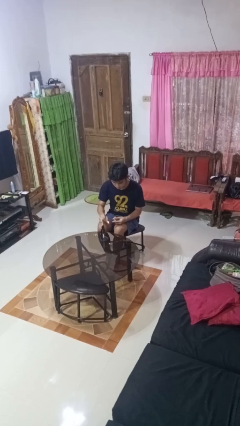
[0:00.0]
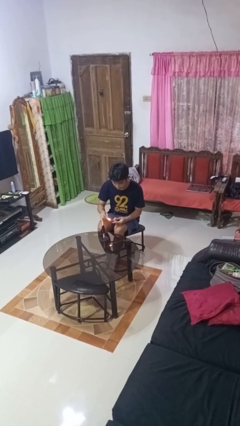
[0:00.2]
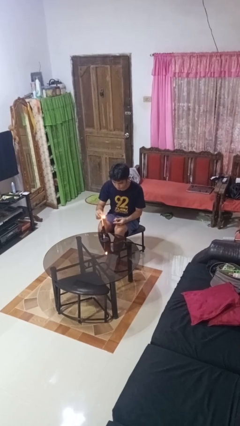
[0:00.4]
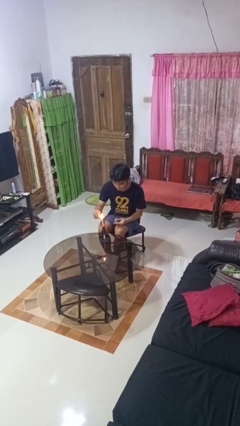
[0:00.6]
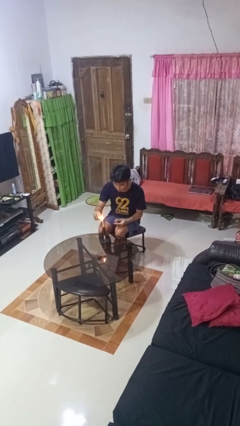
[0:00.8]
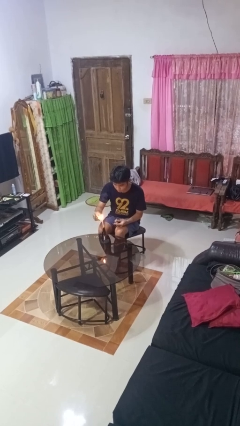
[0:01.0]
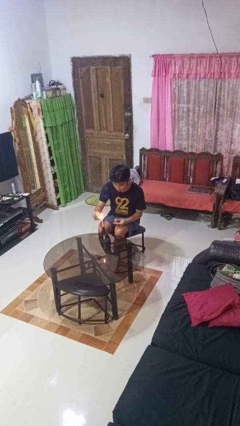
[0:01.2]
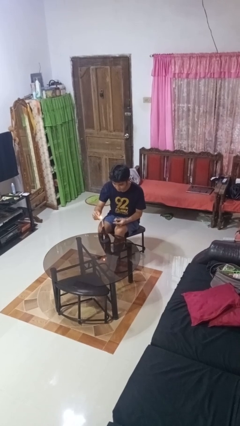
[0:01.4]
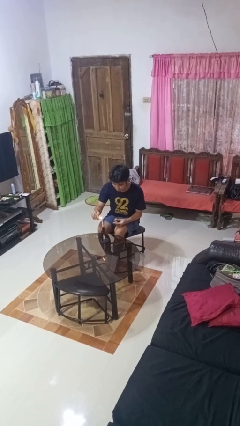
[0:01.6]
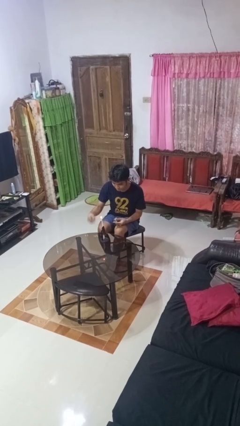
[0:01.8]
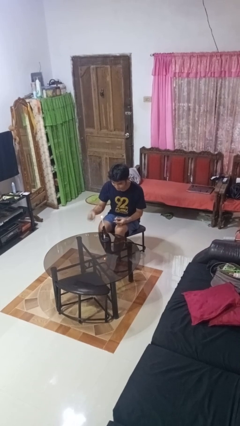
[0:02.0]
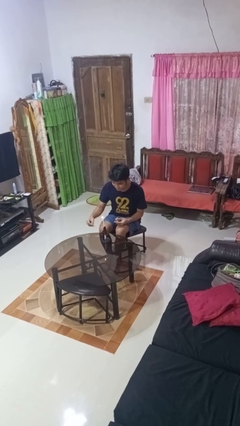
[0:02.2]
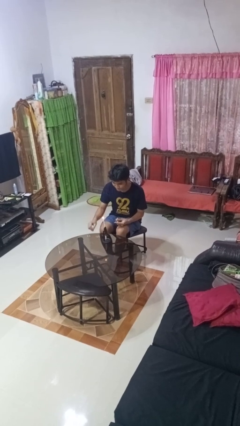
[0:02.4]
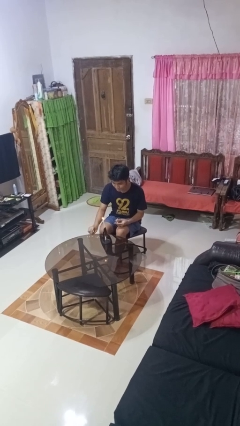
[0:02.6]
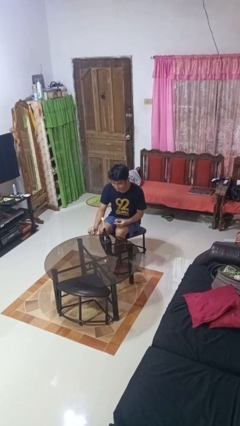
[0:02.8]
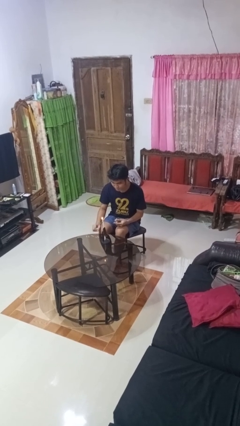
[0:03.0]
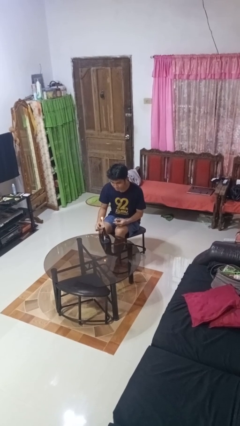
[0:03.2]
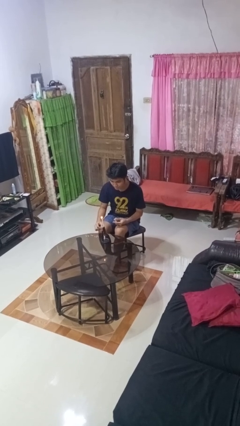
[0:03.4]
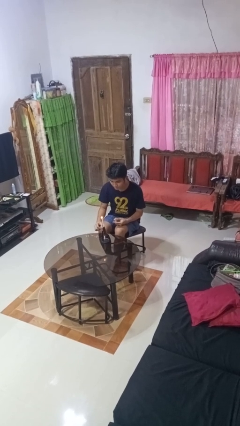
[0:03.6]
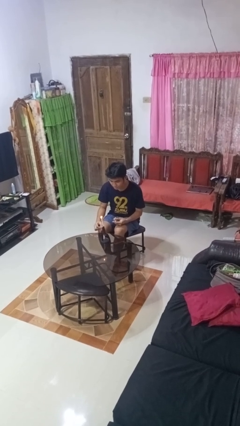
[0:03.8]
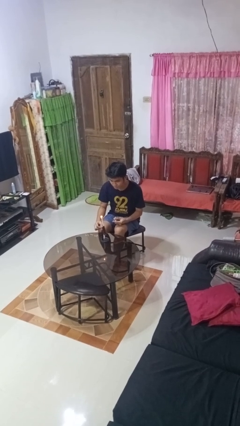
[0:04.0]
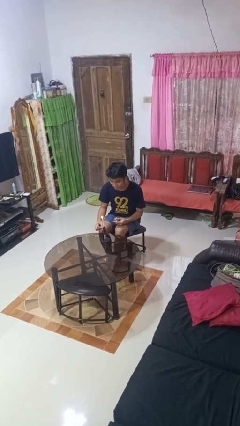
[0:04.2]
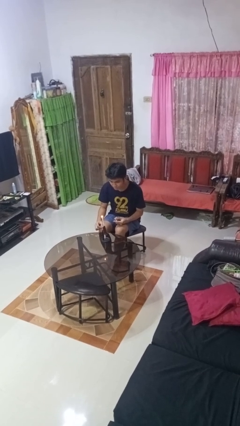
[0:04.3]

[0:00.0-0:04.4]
person lights candle

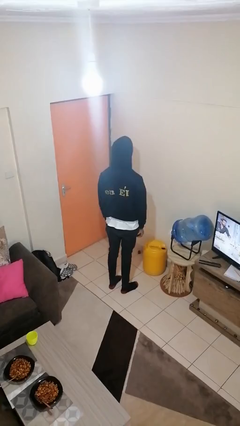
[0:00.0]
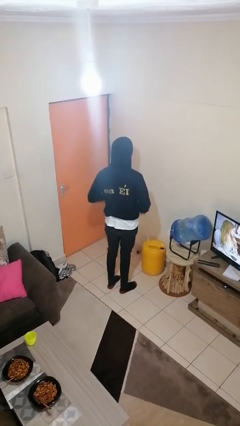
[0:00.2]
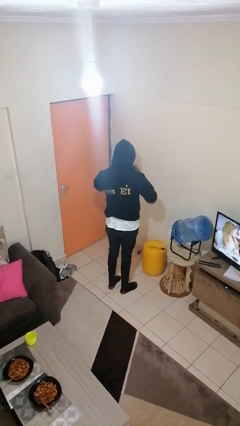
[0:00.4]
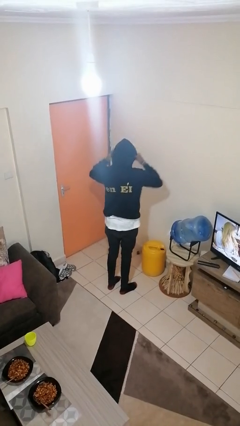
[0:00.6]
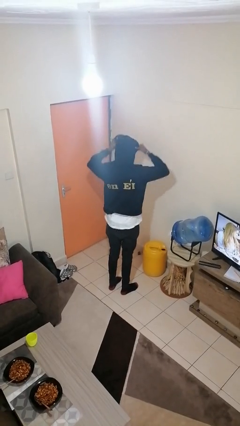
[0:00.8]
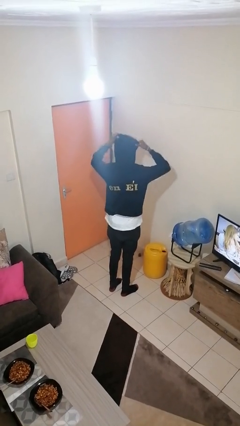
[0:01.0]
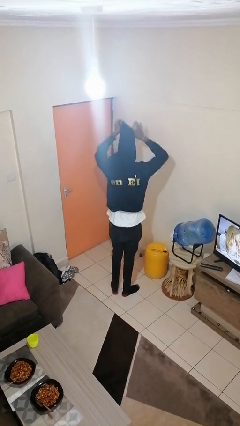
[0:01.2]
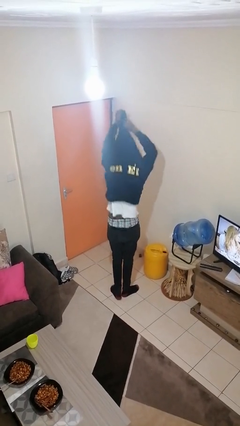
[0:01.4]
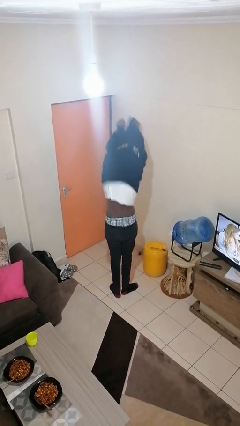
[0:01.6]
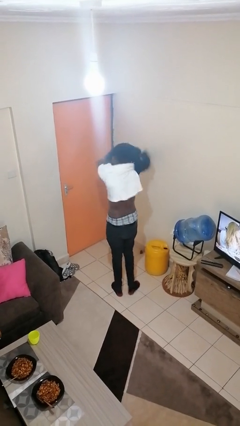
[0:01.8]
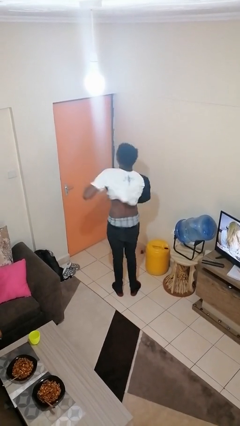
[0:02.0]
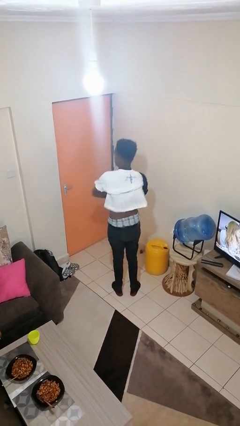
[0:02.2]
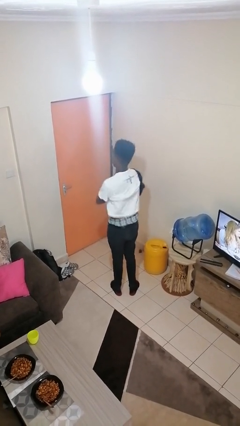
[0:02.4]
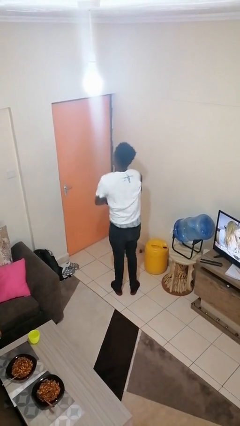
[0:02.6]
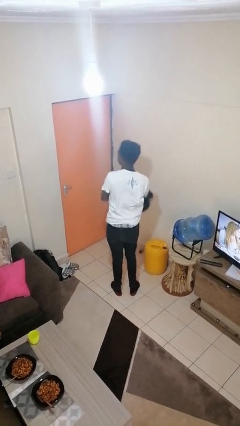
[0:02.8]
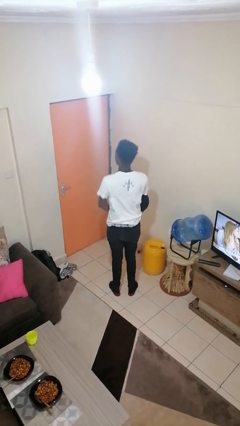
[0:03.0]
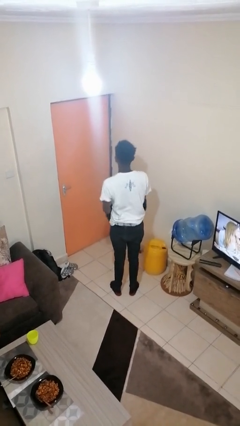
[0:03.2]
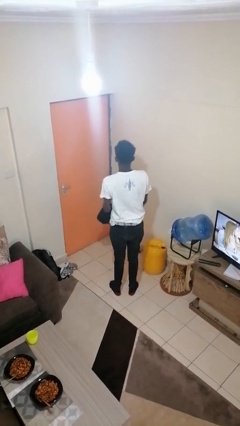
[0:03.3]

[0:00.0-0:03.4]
person takes off hoodie

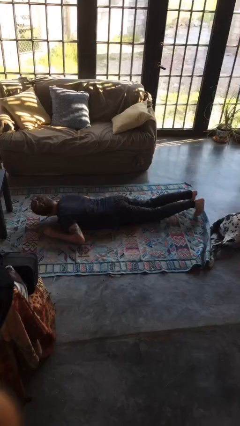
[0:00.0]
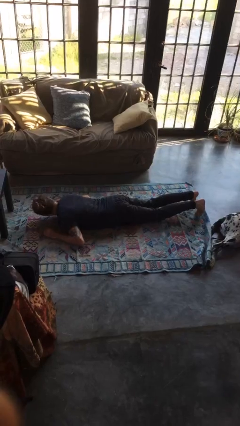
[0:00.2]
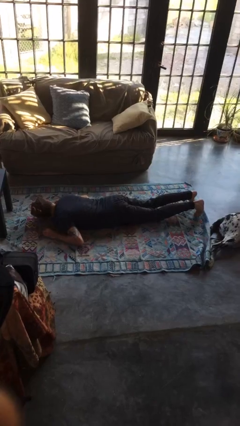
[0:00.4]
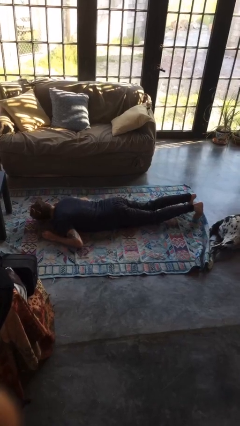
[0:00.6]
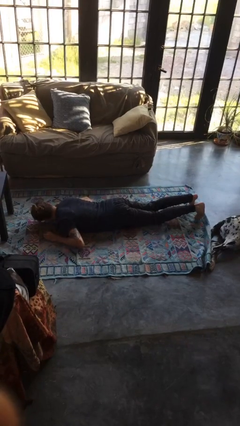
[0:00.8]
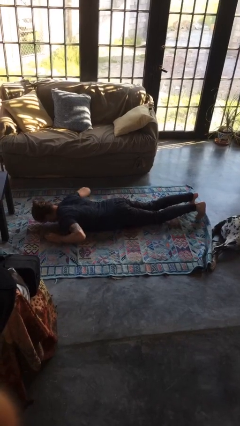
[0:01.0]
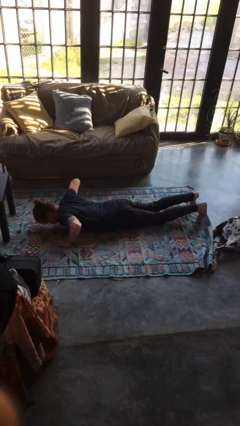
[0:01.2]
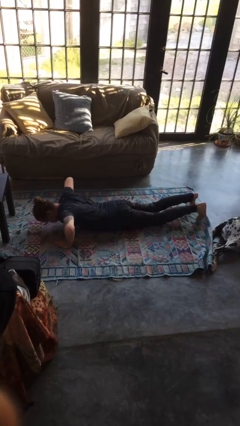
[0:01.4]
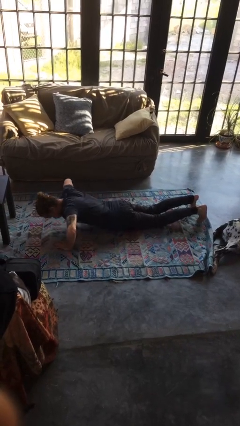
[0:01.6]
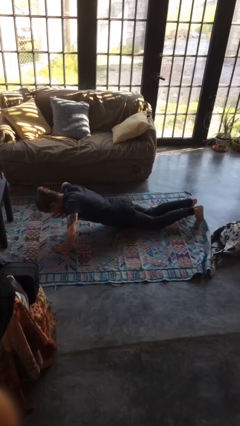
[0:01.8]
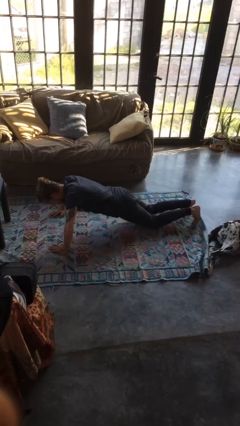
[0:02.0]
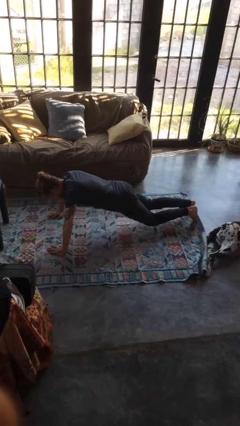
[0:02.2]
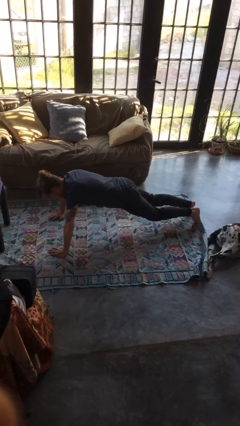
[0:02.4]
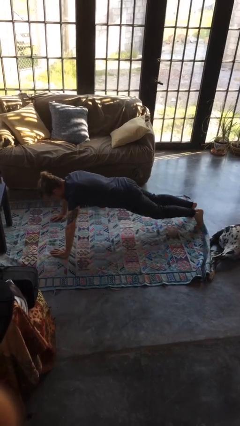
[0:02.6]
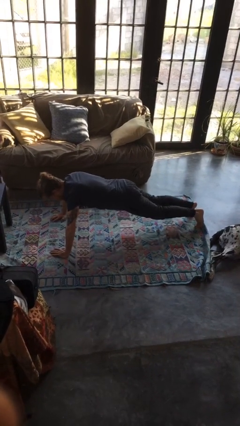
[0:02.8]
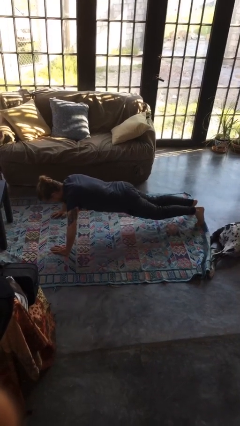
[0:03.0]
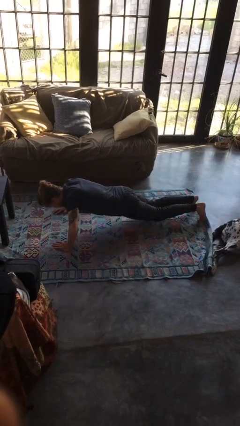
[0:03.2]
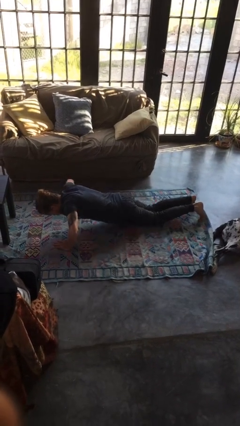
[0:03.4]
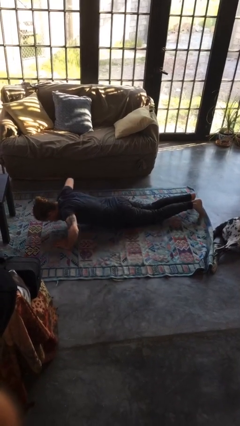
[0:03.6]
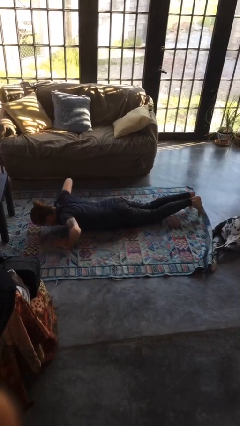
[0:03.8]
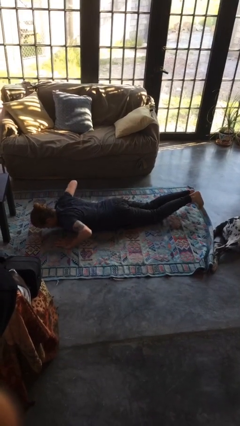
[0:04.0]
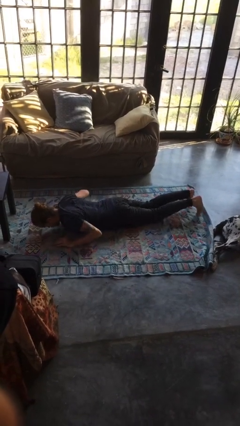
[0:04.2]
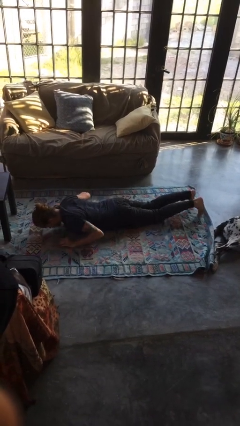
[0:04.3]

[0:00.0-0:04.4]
person exercises with pushup

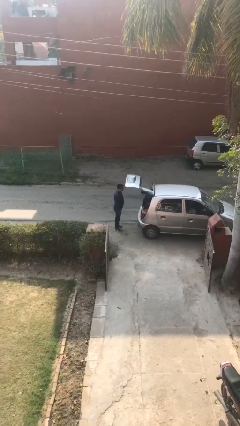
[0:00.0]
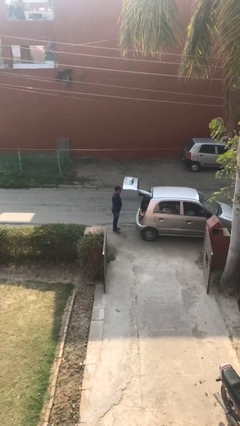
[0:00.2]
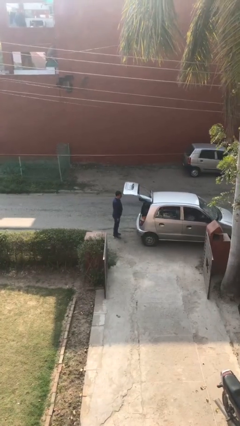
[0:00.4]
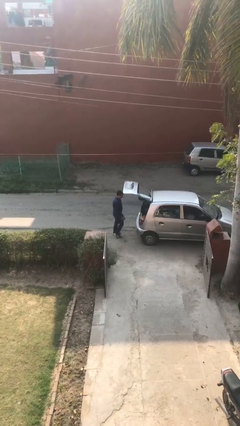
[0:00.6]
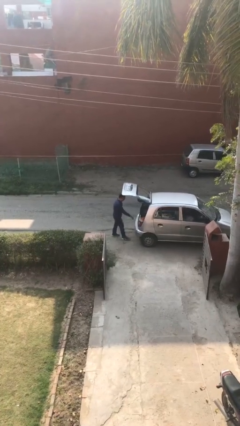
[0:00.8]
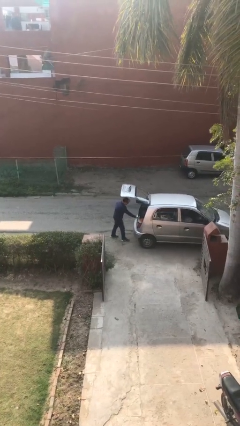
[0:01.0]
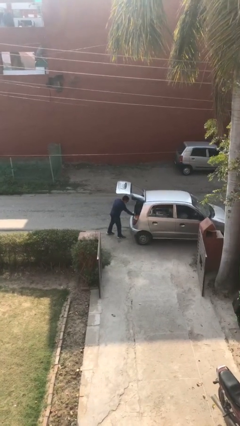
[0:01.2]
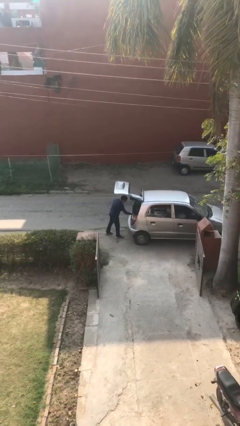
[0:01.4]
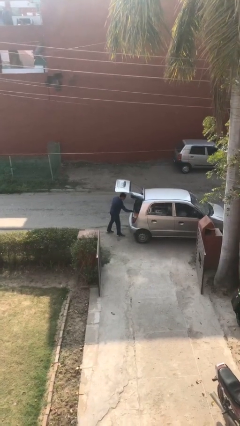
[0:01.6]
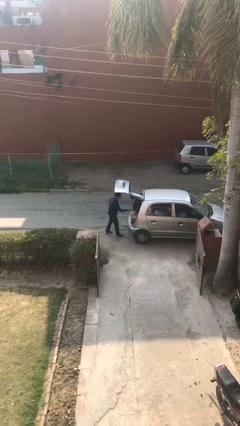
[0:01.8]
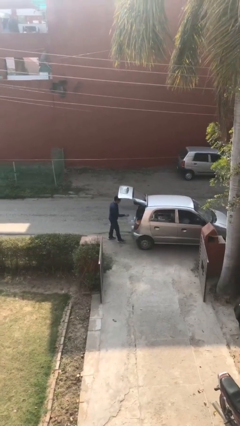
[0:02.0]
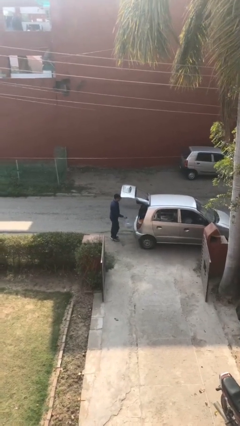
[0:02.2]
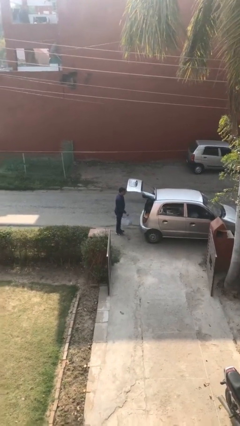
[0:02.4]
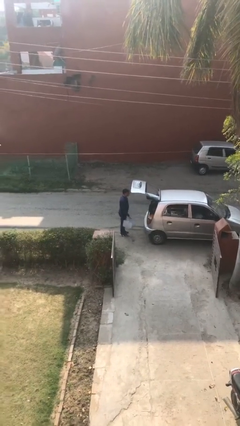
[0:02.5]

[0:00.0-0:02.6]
person unloads car

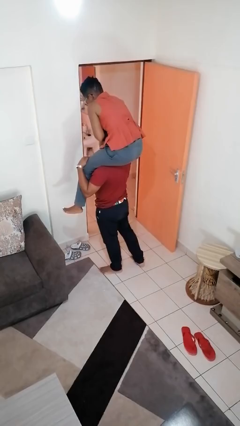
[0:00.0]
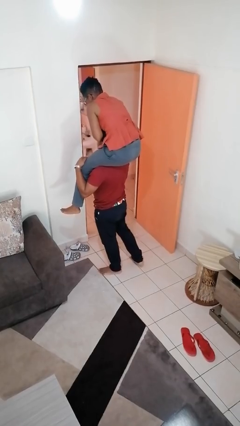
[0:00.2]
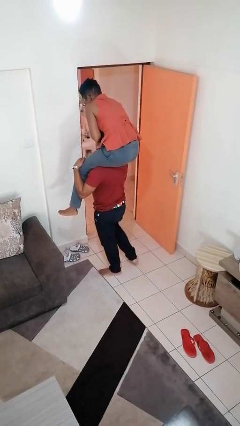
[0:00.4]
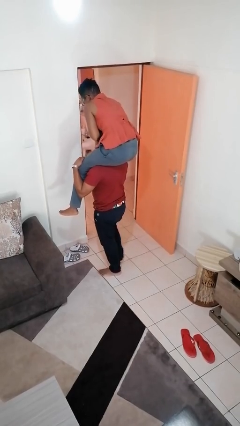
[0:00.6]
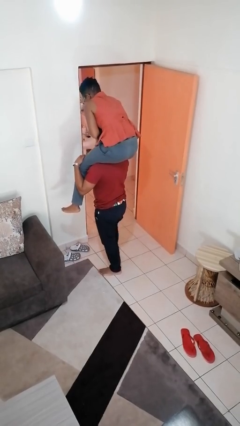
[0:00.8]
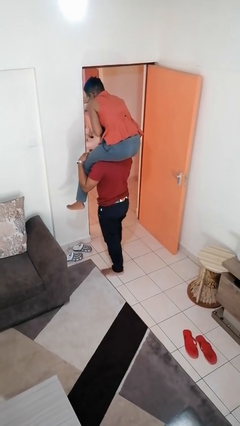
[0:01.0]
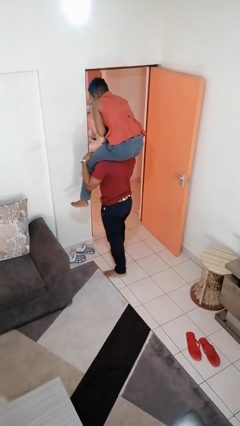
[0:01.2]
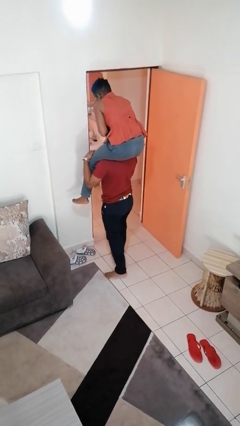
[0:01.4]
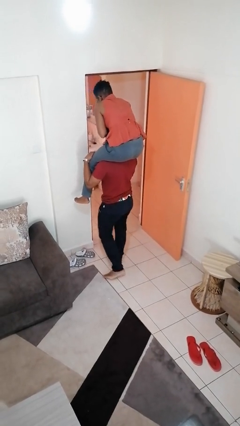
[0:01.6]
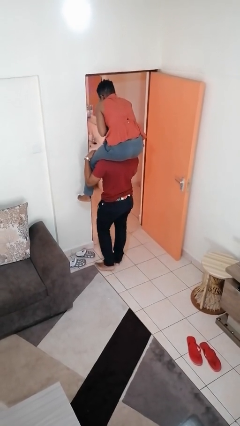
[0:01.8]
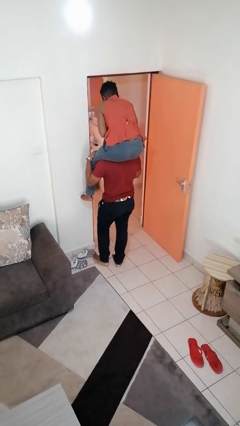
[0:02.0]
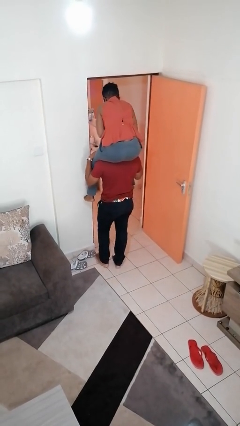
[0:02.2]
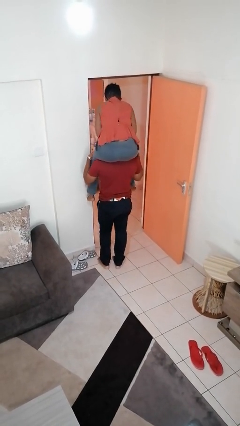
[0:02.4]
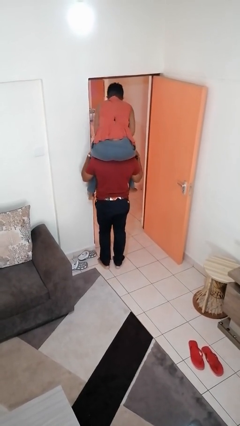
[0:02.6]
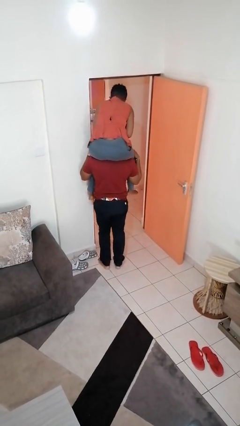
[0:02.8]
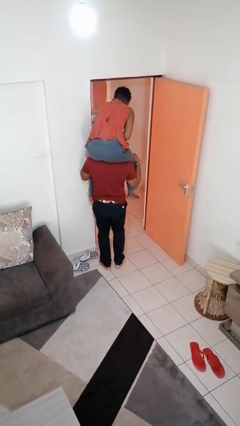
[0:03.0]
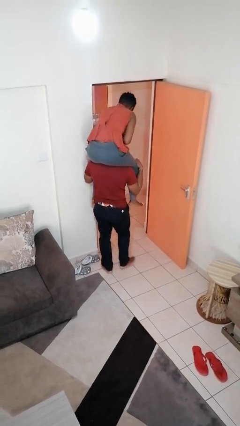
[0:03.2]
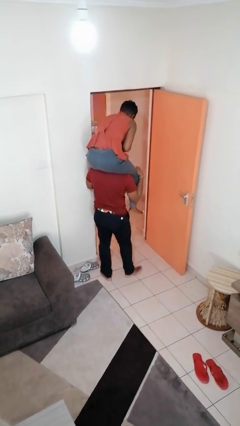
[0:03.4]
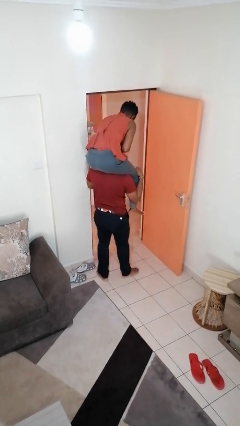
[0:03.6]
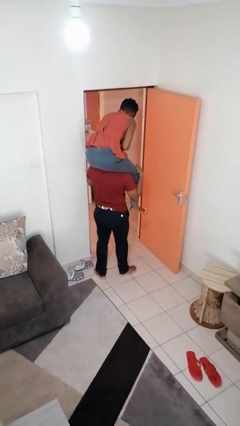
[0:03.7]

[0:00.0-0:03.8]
person carries person on shoulders
